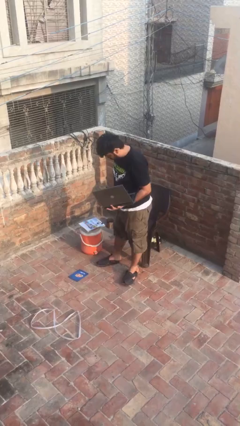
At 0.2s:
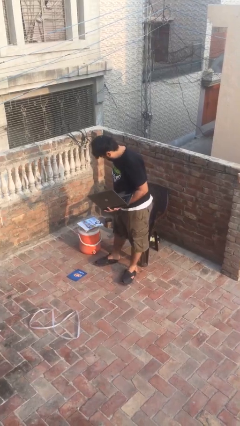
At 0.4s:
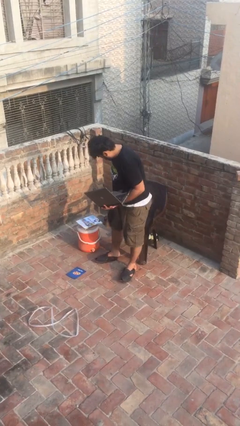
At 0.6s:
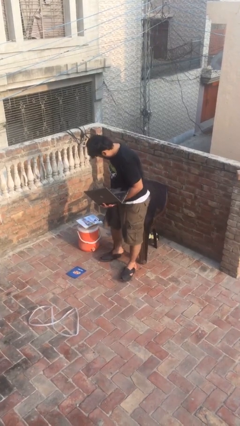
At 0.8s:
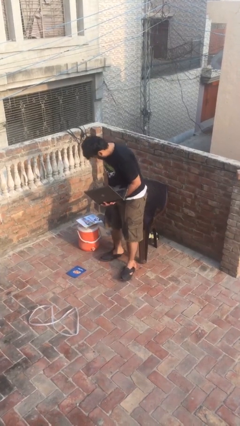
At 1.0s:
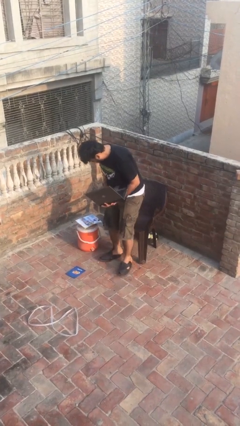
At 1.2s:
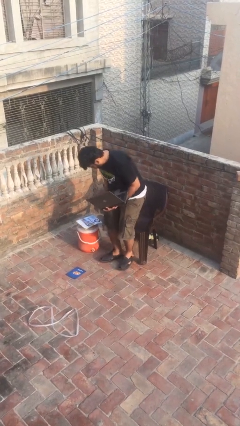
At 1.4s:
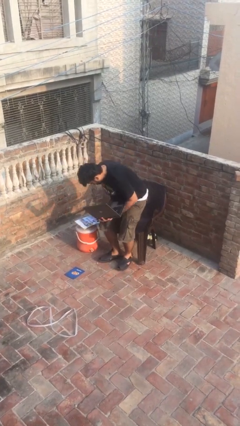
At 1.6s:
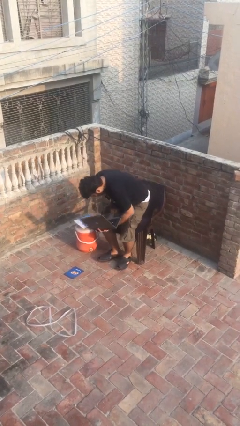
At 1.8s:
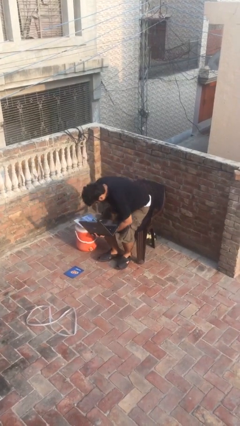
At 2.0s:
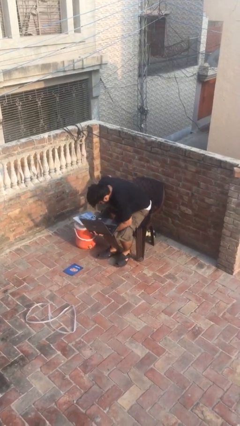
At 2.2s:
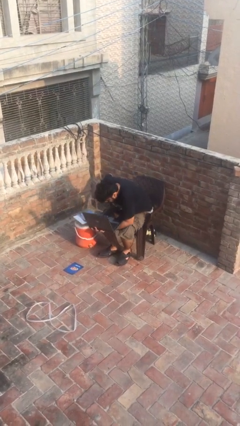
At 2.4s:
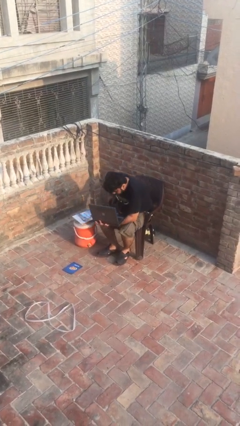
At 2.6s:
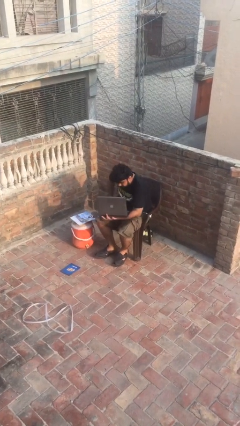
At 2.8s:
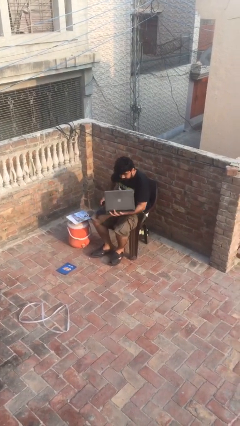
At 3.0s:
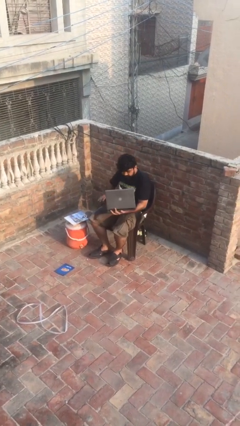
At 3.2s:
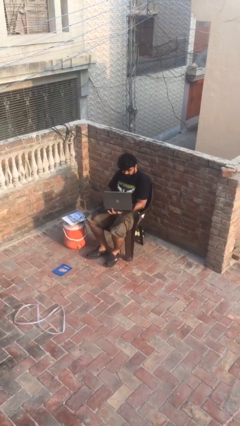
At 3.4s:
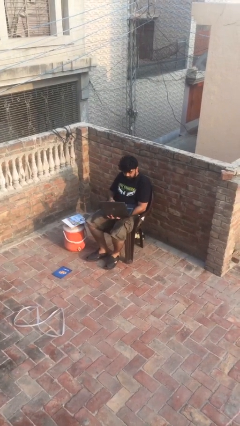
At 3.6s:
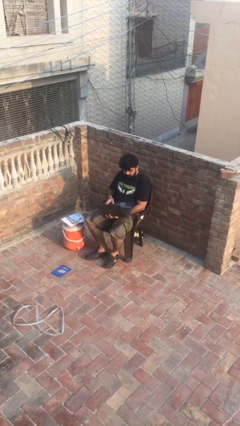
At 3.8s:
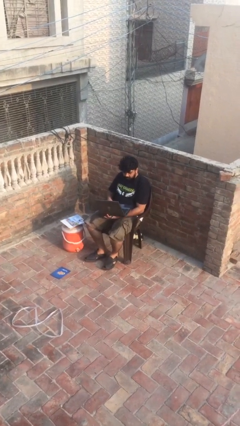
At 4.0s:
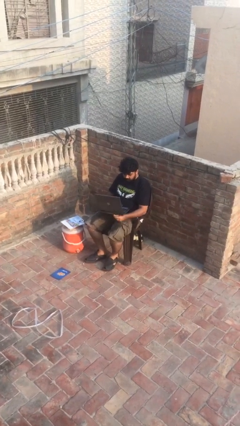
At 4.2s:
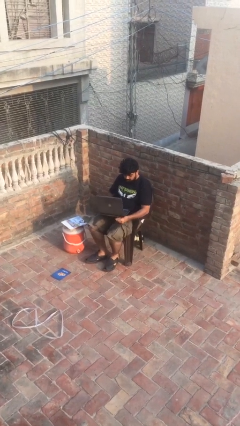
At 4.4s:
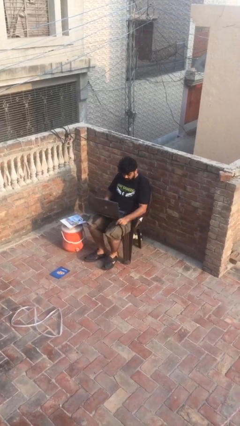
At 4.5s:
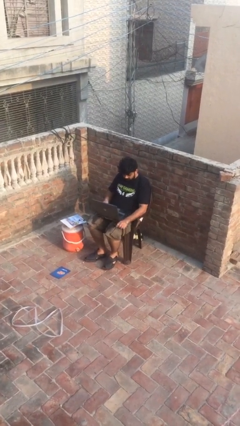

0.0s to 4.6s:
person sits down

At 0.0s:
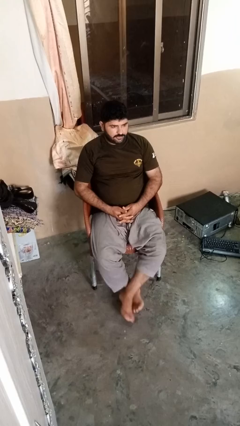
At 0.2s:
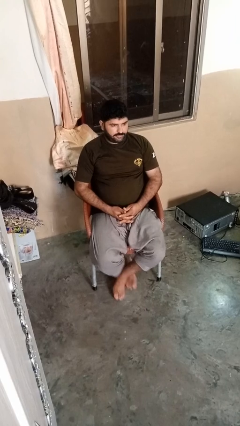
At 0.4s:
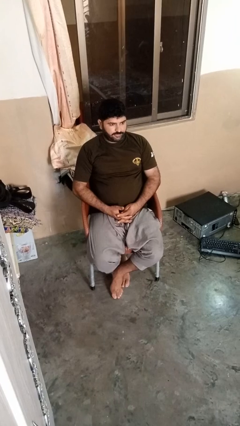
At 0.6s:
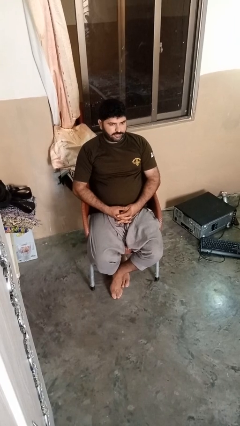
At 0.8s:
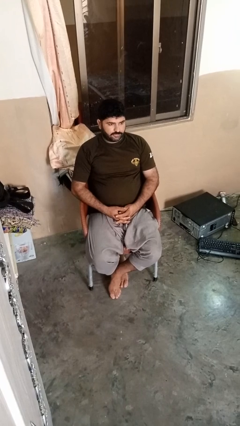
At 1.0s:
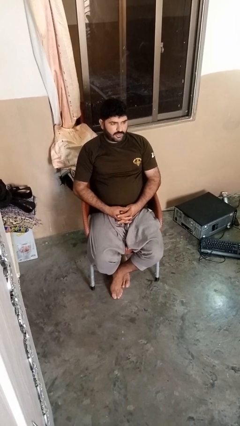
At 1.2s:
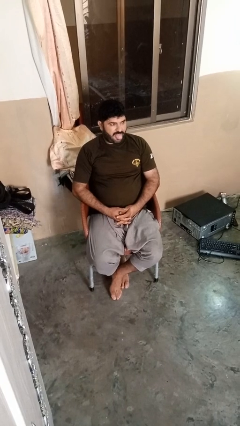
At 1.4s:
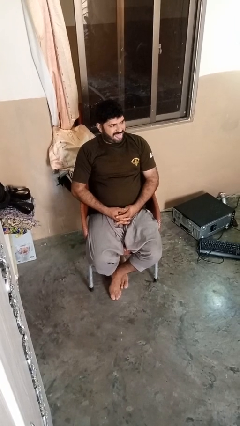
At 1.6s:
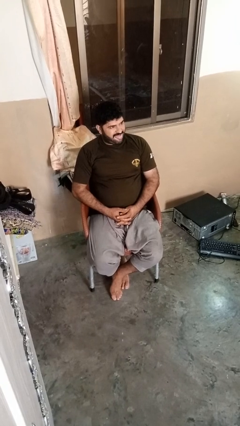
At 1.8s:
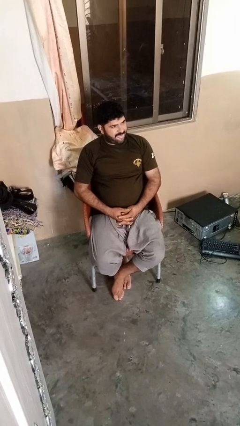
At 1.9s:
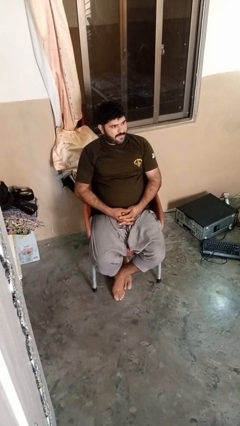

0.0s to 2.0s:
person sticks out tongue

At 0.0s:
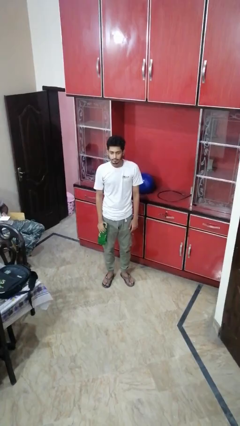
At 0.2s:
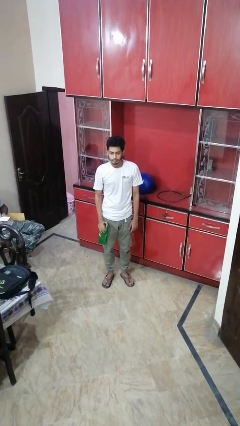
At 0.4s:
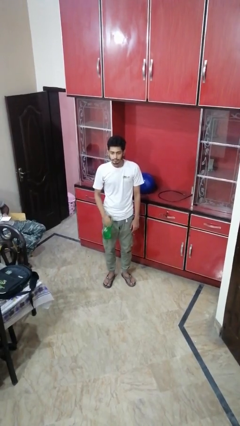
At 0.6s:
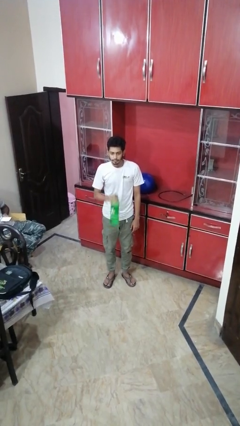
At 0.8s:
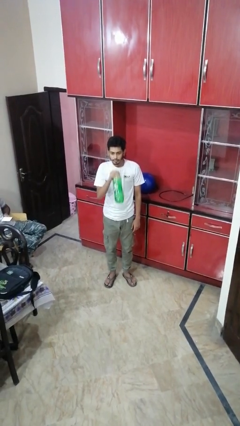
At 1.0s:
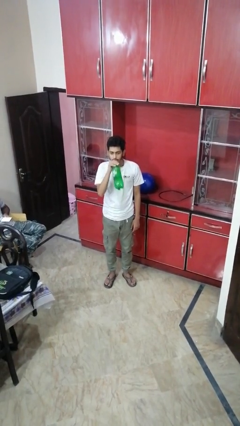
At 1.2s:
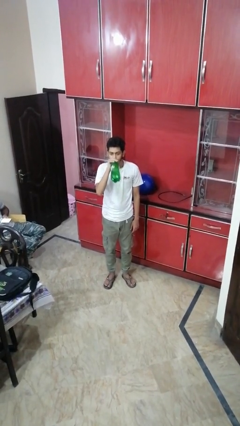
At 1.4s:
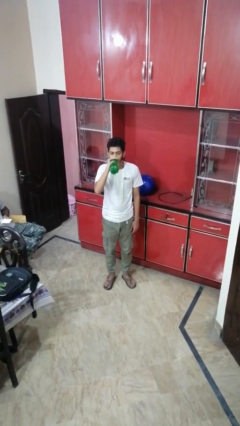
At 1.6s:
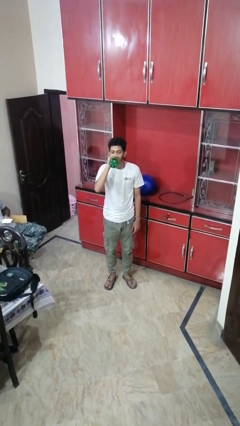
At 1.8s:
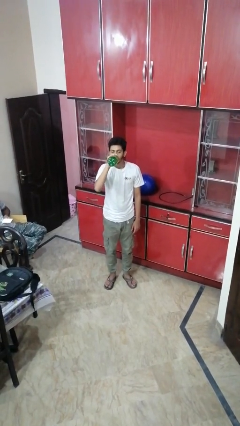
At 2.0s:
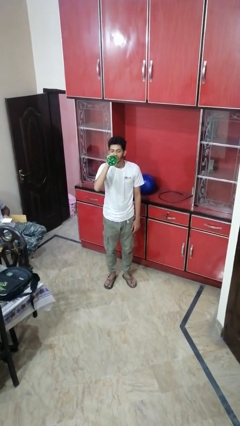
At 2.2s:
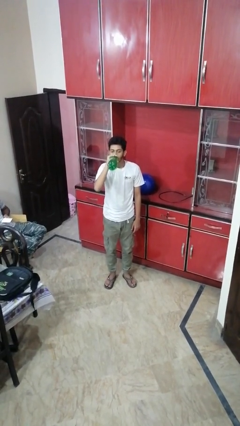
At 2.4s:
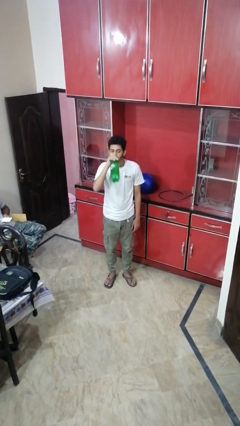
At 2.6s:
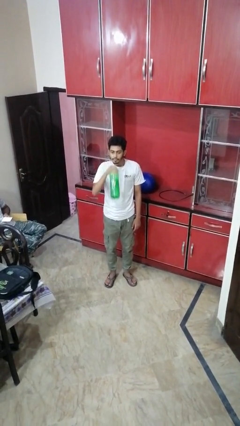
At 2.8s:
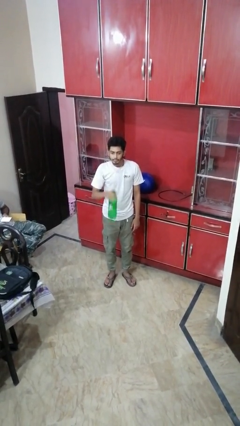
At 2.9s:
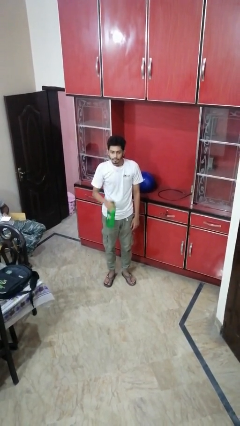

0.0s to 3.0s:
person drinks from bottle

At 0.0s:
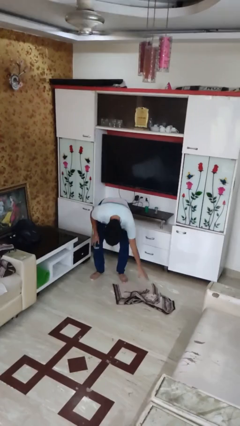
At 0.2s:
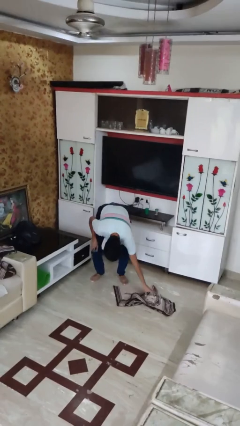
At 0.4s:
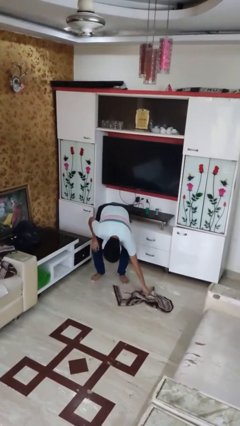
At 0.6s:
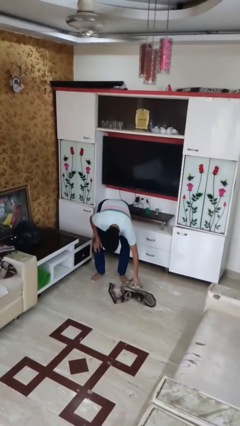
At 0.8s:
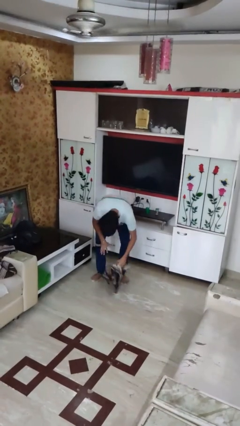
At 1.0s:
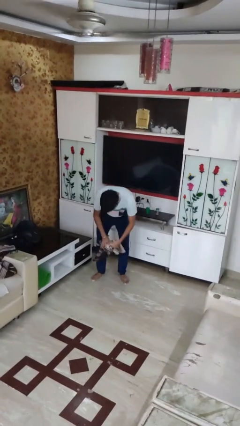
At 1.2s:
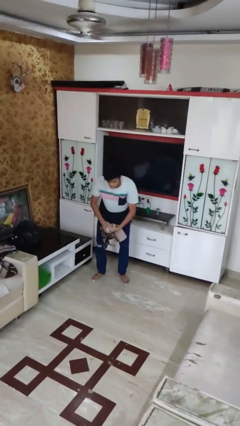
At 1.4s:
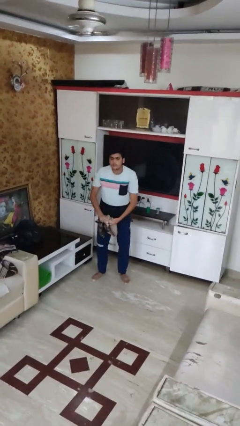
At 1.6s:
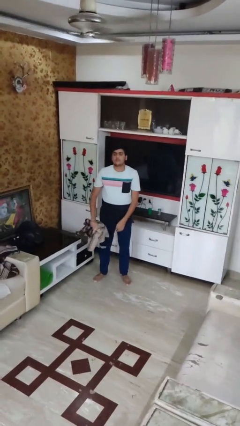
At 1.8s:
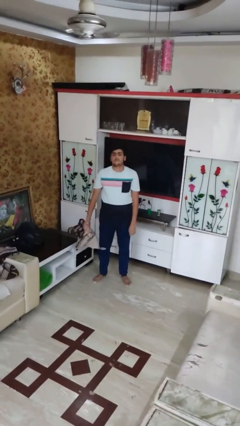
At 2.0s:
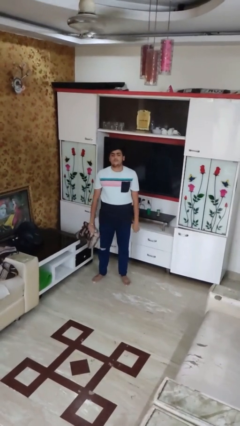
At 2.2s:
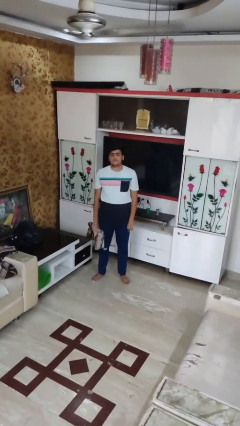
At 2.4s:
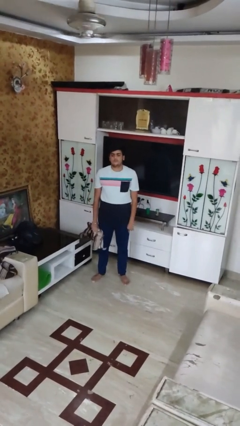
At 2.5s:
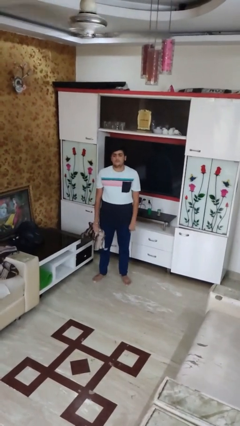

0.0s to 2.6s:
person picks up object from floor

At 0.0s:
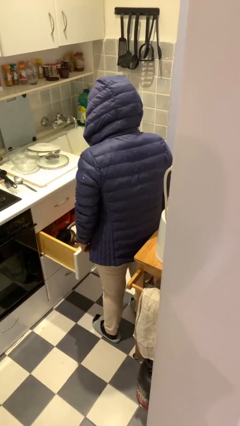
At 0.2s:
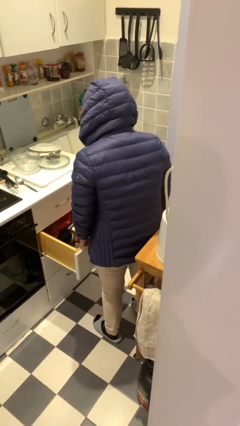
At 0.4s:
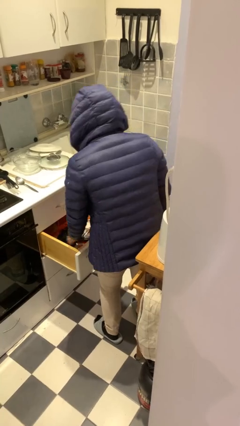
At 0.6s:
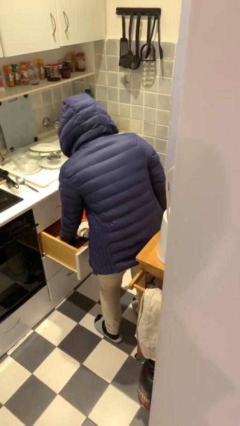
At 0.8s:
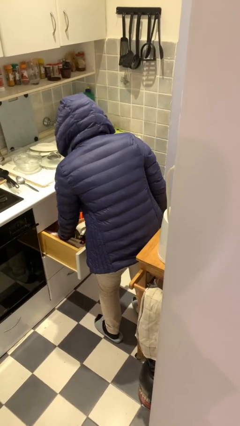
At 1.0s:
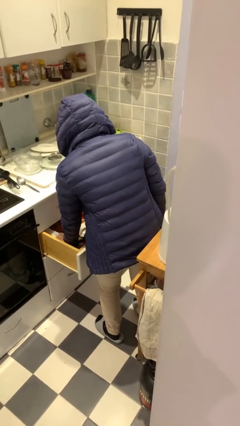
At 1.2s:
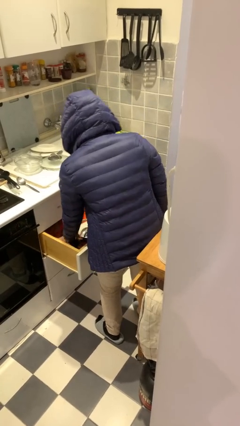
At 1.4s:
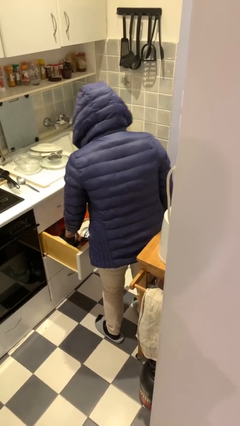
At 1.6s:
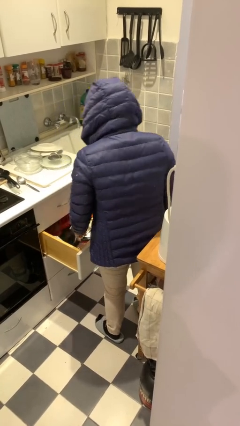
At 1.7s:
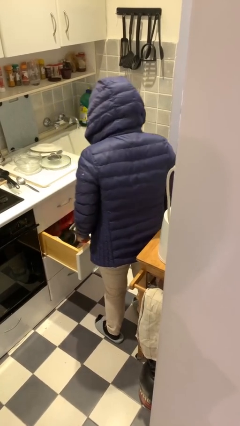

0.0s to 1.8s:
person searches in kitchen drawer

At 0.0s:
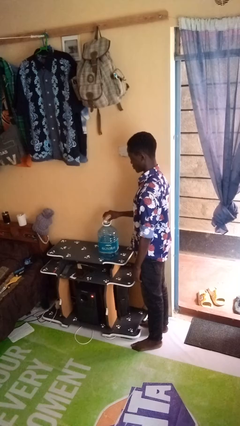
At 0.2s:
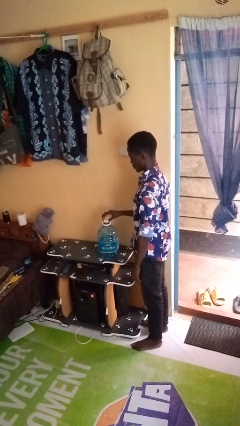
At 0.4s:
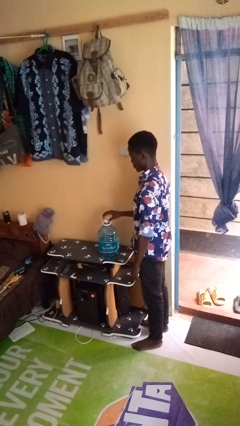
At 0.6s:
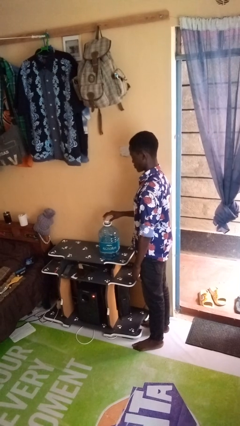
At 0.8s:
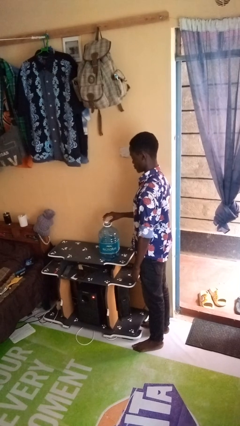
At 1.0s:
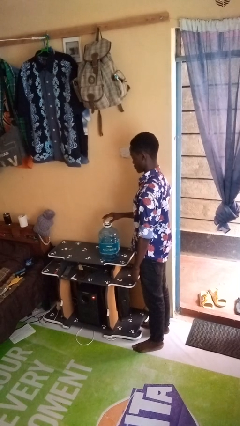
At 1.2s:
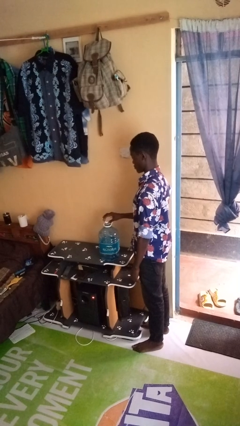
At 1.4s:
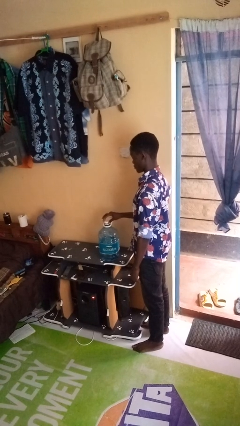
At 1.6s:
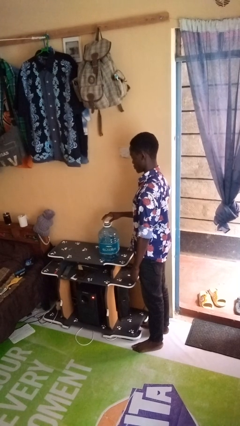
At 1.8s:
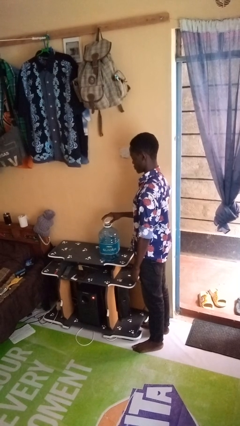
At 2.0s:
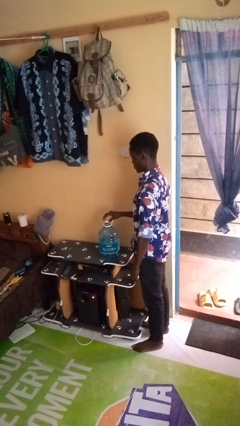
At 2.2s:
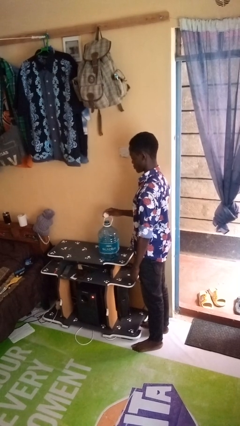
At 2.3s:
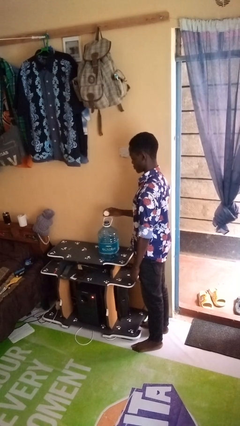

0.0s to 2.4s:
person unscrews lid from bottle

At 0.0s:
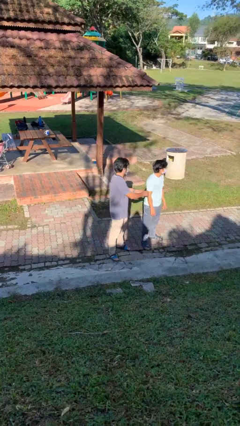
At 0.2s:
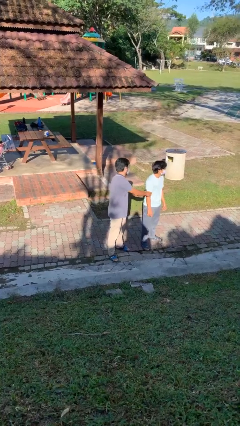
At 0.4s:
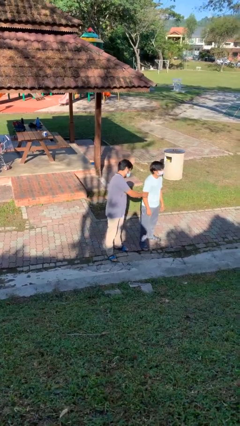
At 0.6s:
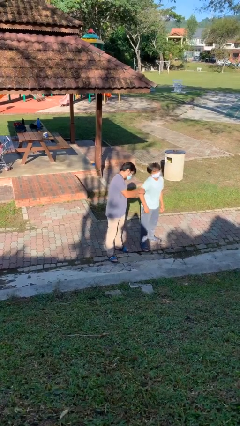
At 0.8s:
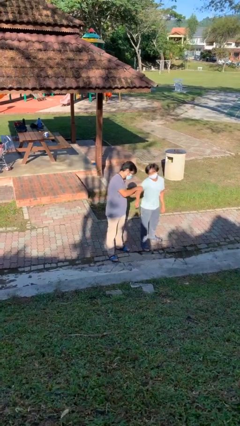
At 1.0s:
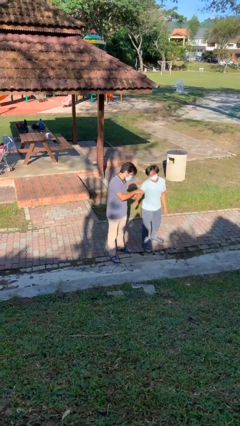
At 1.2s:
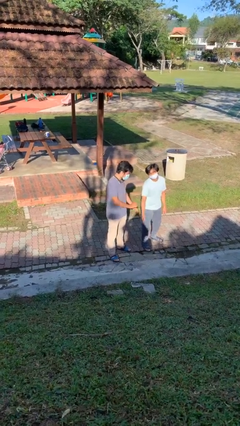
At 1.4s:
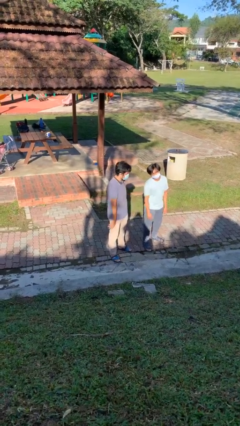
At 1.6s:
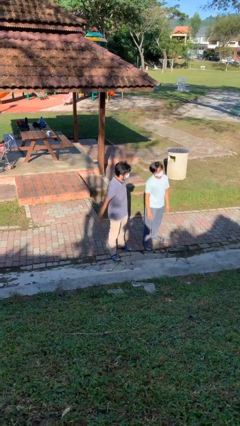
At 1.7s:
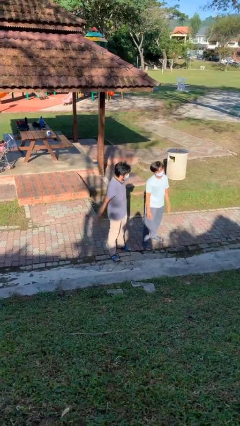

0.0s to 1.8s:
person grabs person by bicep
